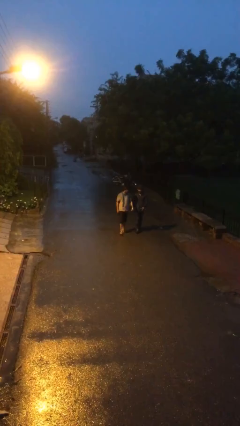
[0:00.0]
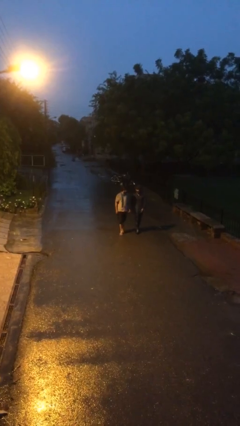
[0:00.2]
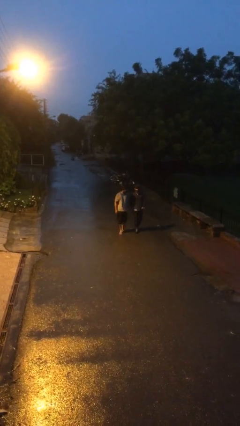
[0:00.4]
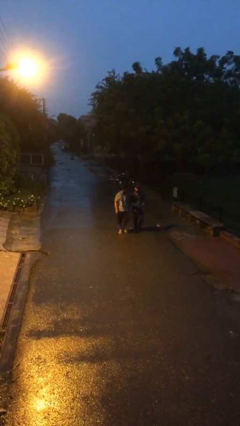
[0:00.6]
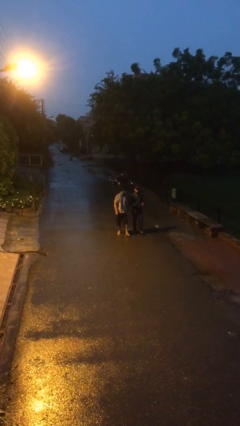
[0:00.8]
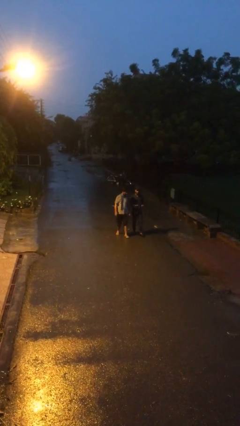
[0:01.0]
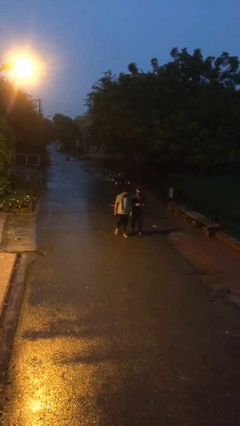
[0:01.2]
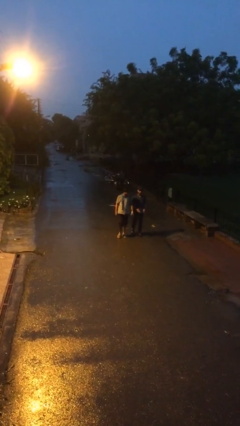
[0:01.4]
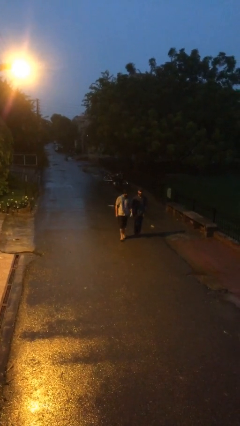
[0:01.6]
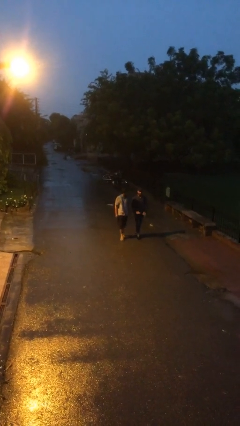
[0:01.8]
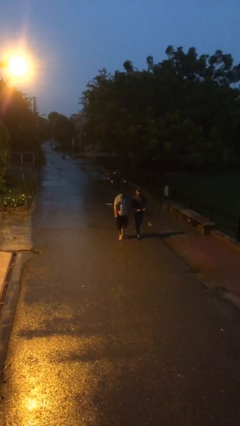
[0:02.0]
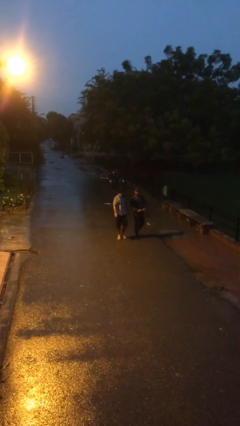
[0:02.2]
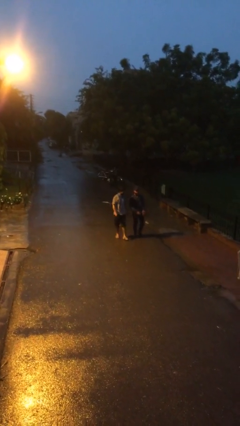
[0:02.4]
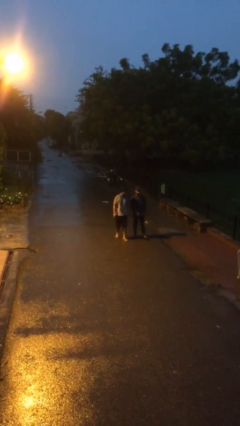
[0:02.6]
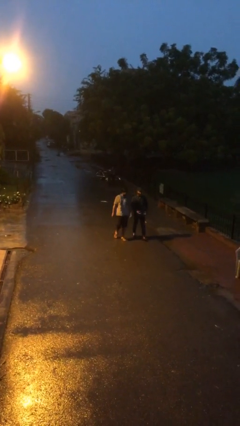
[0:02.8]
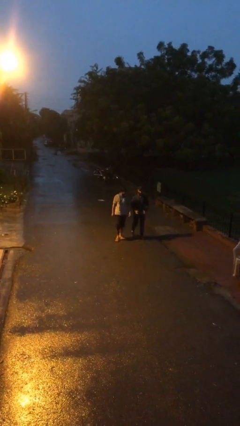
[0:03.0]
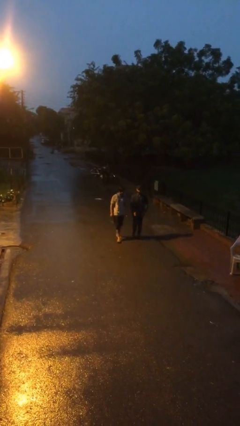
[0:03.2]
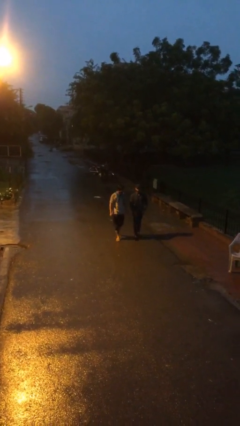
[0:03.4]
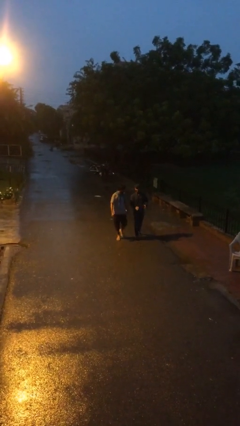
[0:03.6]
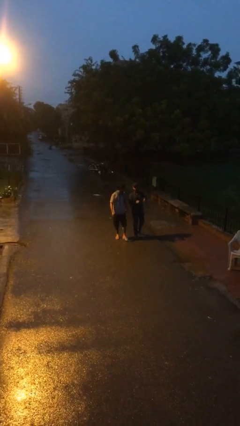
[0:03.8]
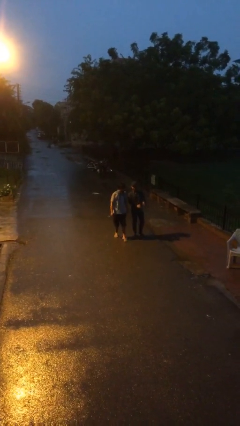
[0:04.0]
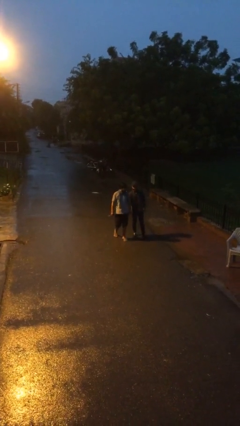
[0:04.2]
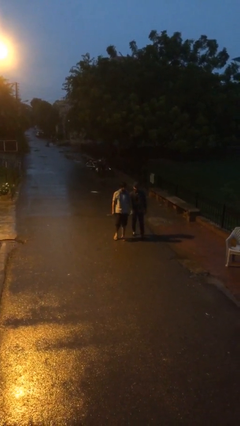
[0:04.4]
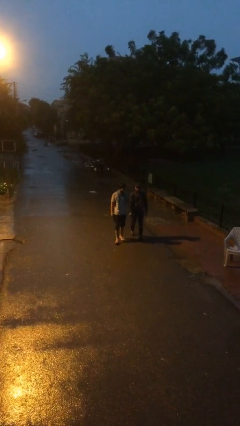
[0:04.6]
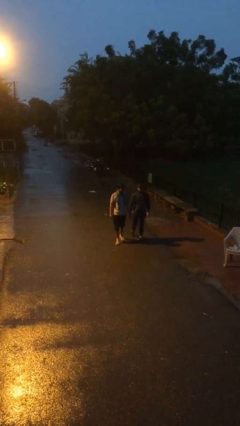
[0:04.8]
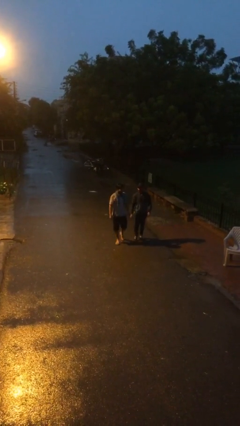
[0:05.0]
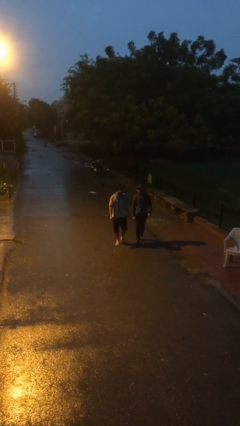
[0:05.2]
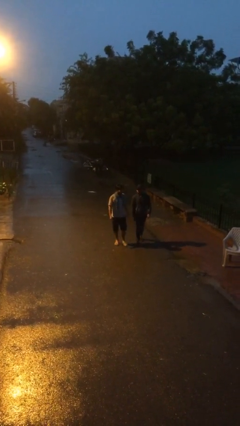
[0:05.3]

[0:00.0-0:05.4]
person talks to person

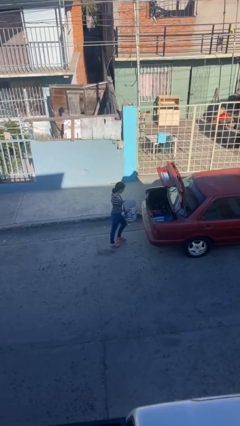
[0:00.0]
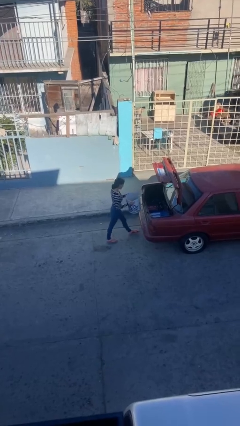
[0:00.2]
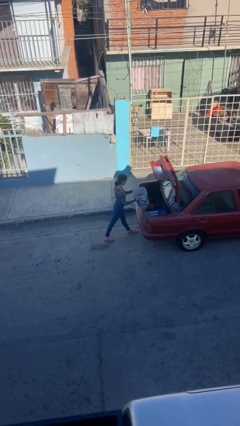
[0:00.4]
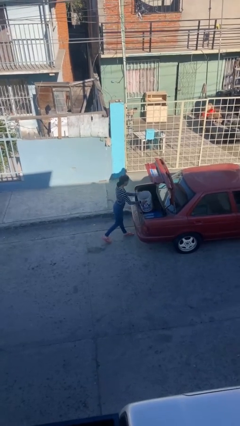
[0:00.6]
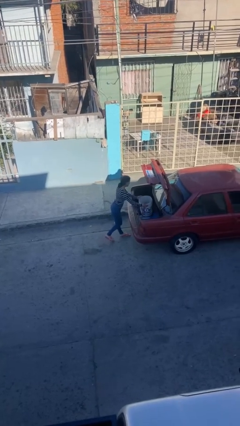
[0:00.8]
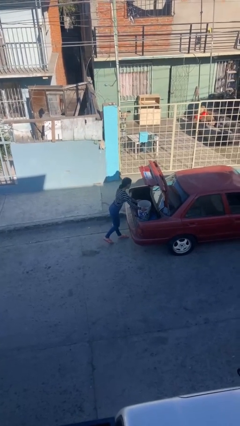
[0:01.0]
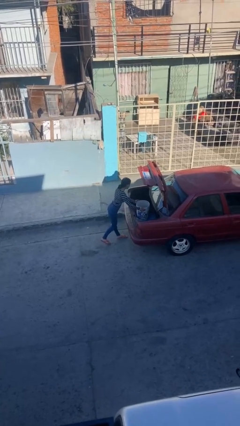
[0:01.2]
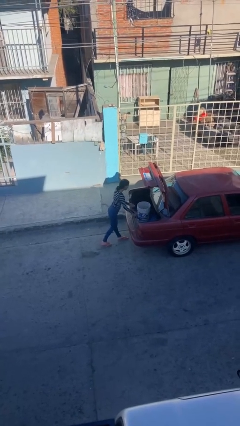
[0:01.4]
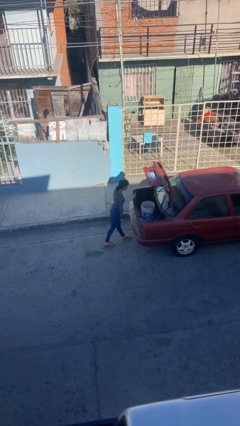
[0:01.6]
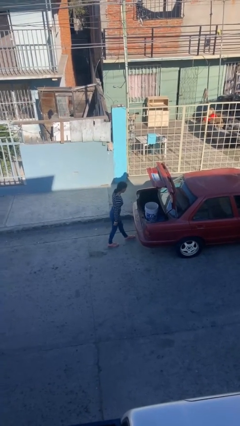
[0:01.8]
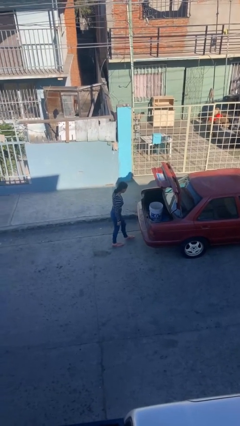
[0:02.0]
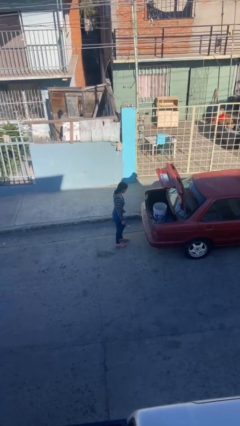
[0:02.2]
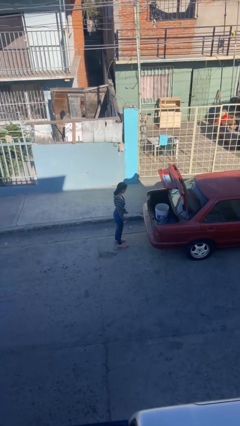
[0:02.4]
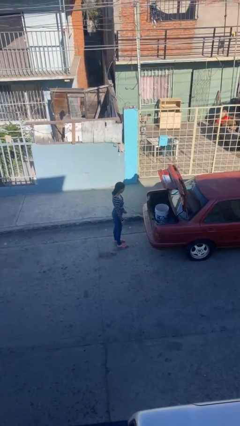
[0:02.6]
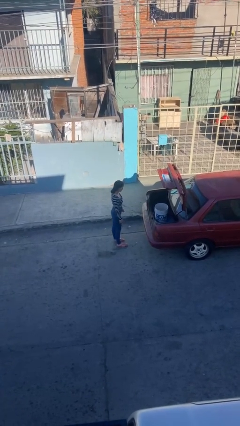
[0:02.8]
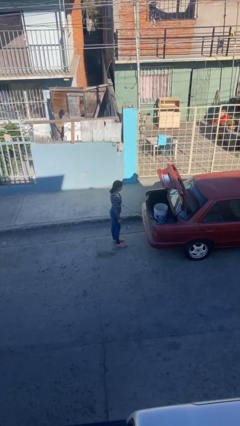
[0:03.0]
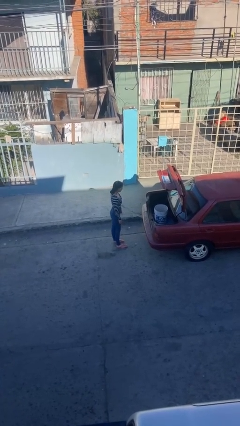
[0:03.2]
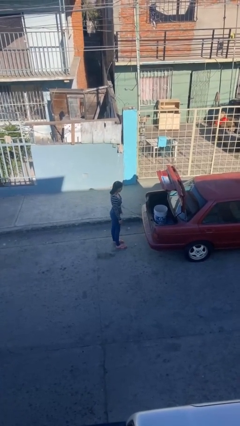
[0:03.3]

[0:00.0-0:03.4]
person loads car

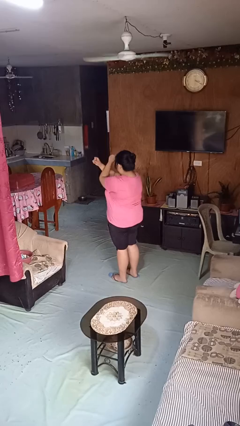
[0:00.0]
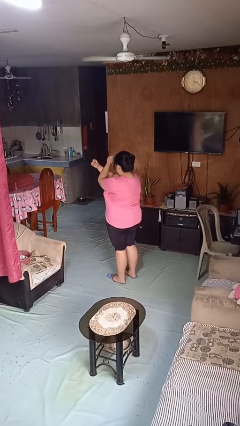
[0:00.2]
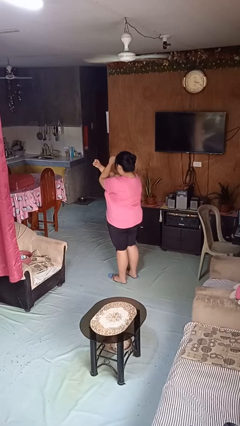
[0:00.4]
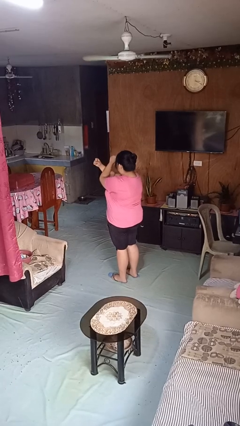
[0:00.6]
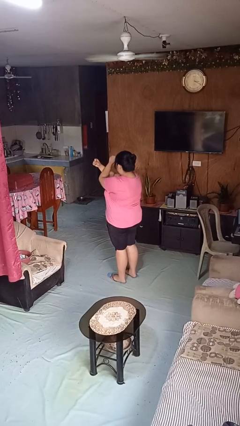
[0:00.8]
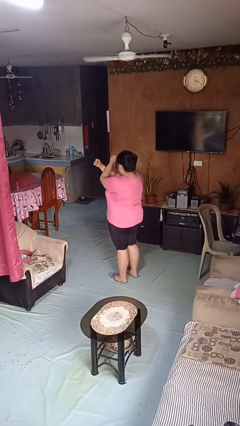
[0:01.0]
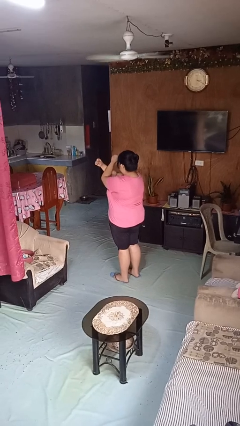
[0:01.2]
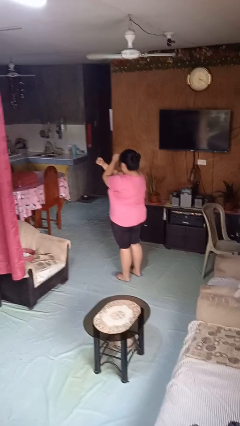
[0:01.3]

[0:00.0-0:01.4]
person gestures arms x

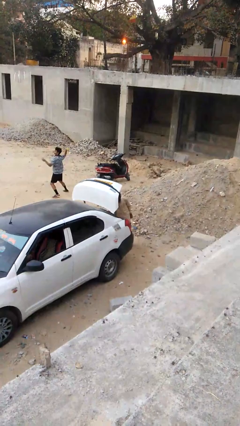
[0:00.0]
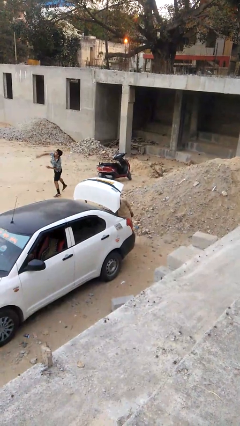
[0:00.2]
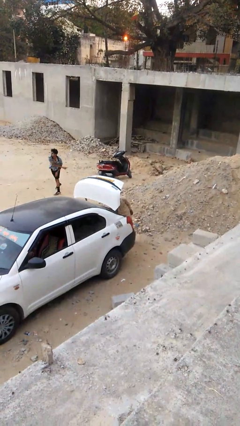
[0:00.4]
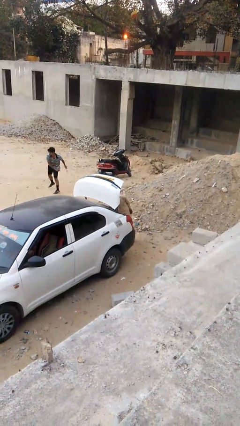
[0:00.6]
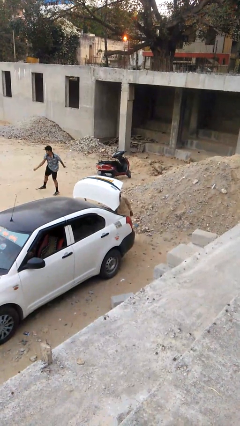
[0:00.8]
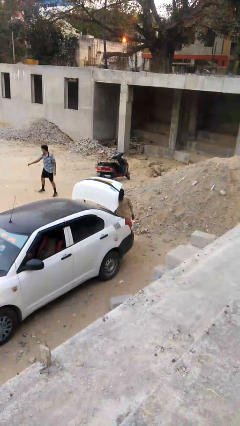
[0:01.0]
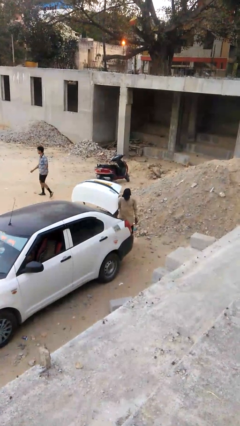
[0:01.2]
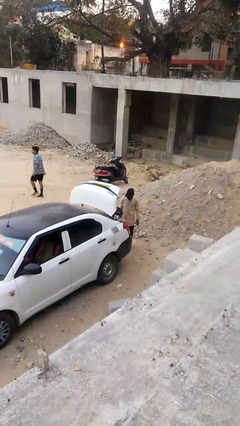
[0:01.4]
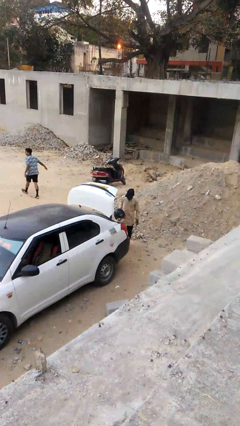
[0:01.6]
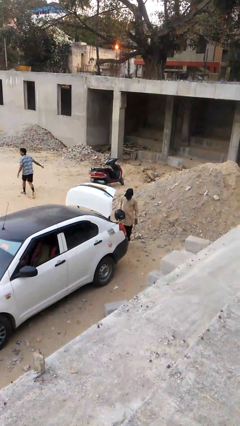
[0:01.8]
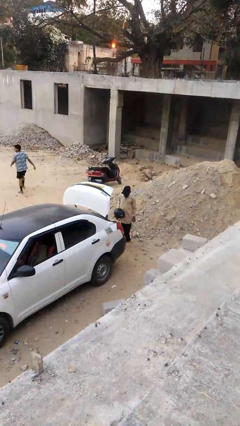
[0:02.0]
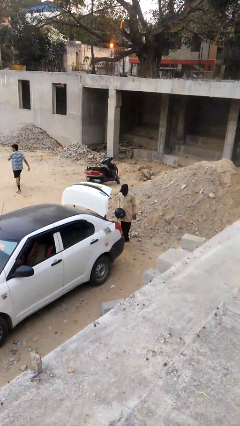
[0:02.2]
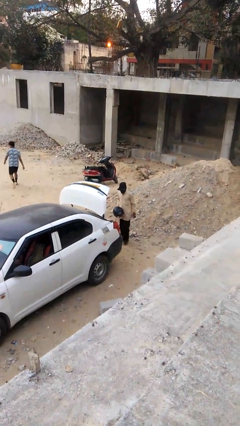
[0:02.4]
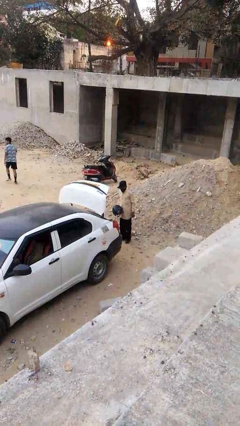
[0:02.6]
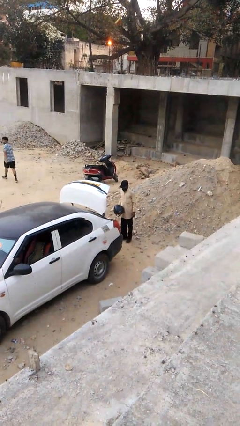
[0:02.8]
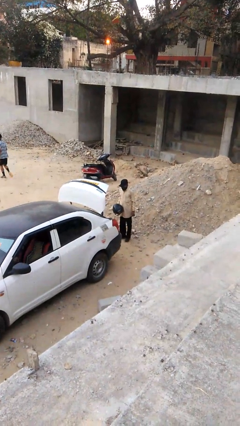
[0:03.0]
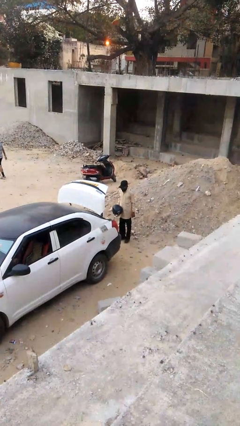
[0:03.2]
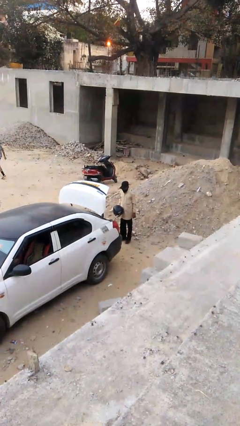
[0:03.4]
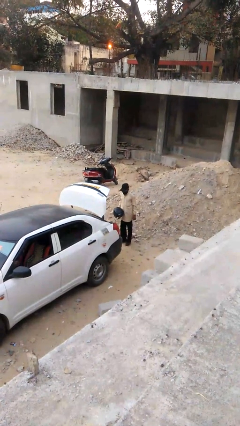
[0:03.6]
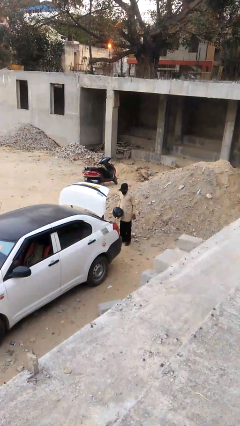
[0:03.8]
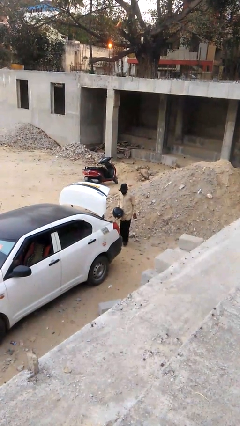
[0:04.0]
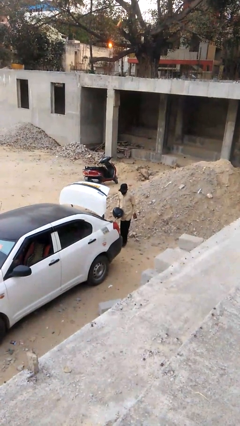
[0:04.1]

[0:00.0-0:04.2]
person unloads car

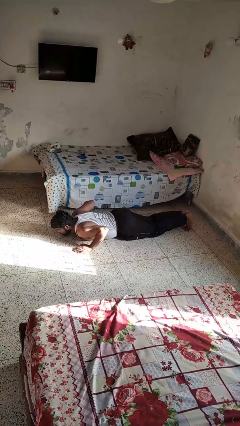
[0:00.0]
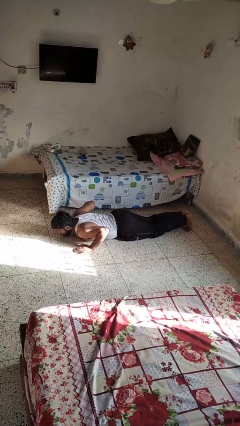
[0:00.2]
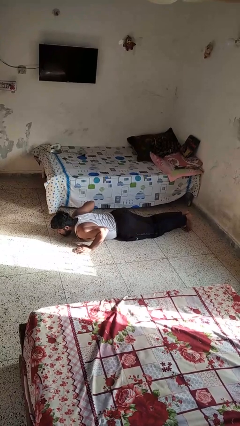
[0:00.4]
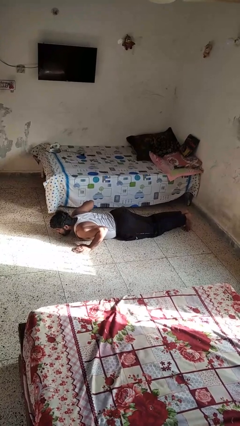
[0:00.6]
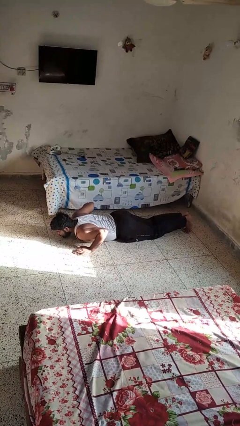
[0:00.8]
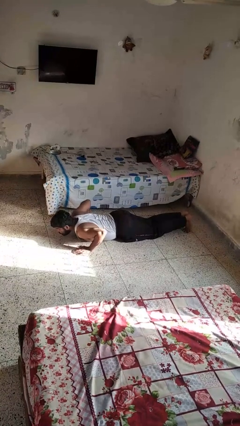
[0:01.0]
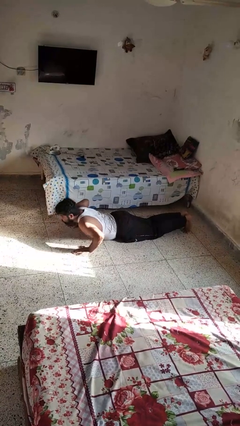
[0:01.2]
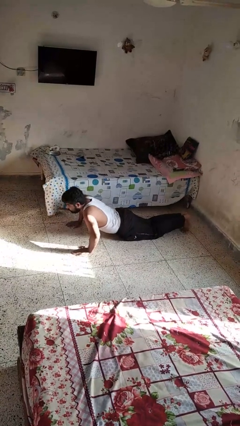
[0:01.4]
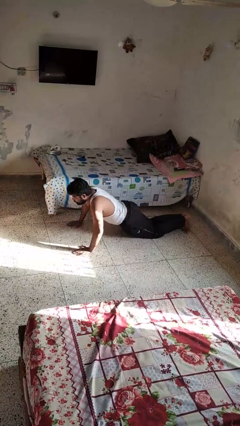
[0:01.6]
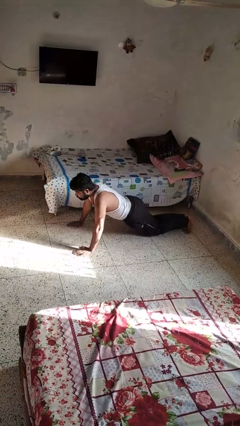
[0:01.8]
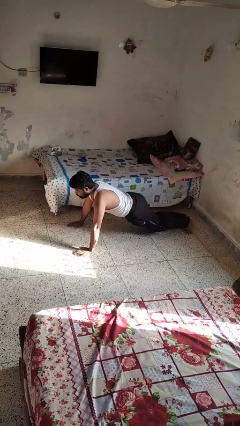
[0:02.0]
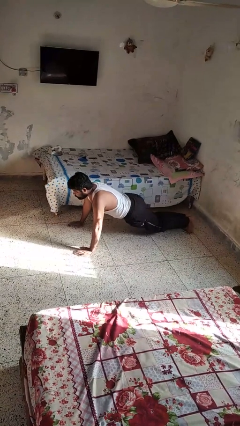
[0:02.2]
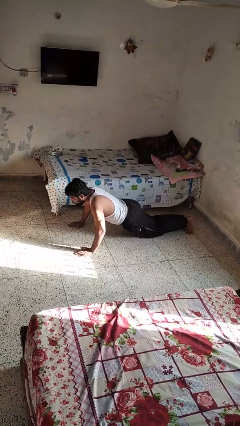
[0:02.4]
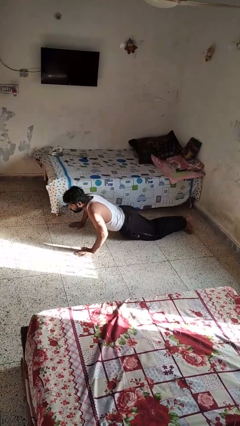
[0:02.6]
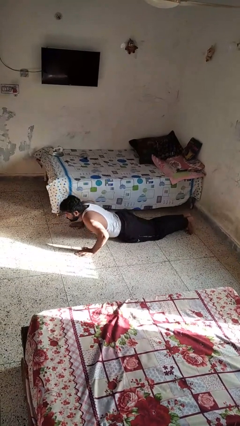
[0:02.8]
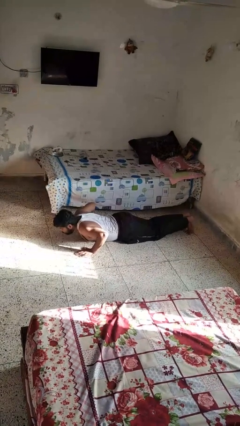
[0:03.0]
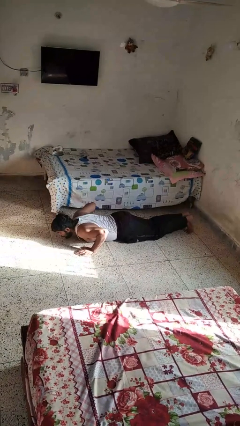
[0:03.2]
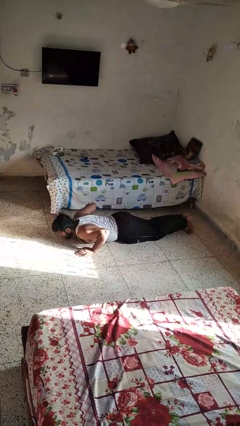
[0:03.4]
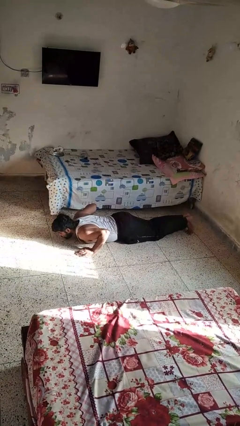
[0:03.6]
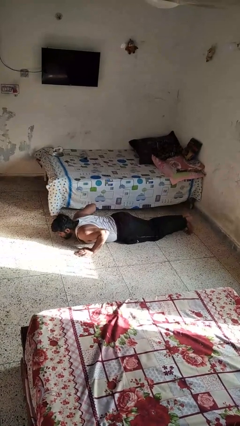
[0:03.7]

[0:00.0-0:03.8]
person exercises with pushup
